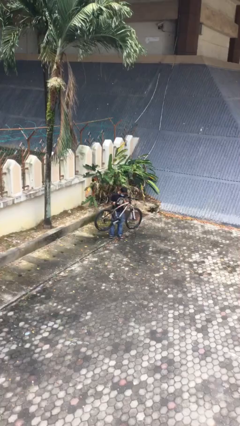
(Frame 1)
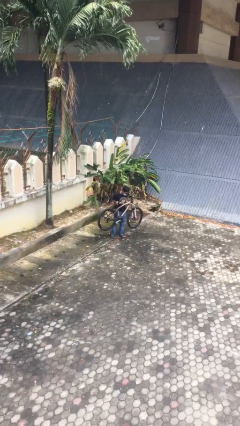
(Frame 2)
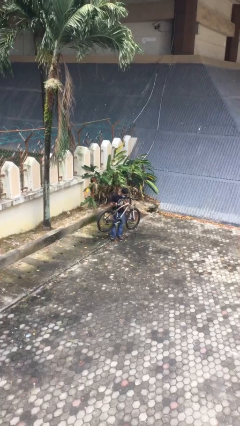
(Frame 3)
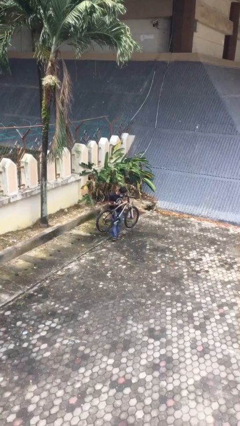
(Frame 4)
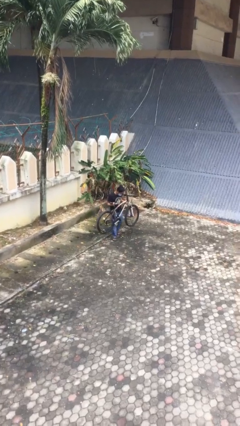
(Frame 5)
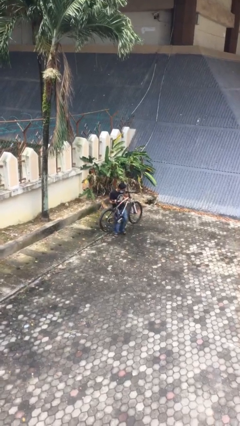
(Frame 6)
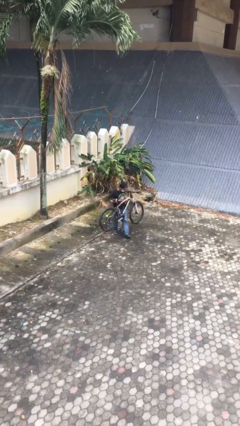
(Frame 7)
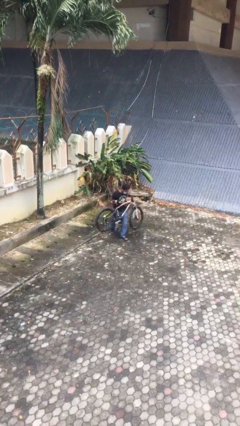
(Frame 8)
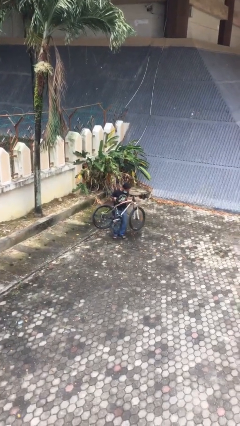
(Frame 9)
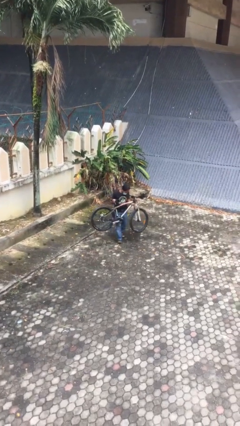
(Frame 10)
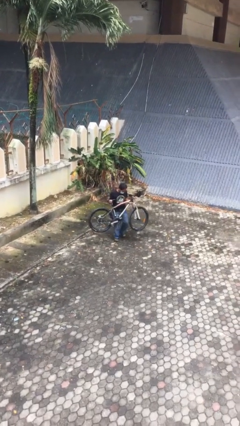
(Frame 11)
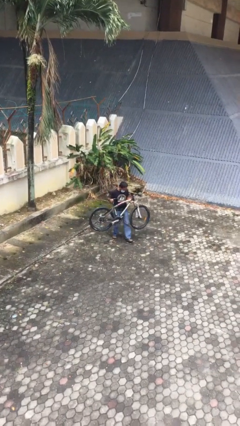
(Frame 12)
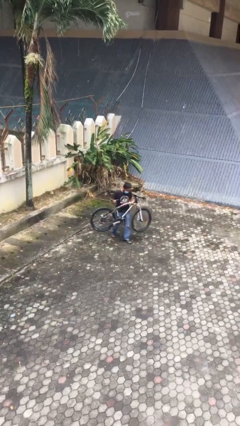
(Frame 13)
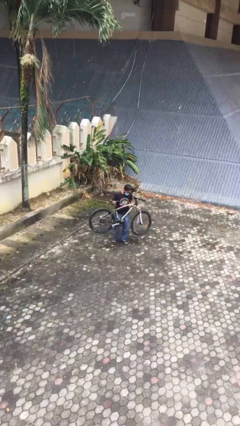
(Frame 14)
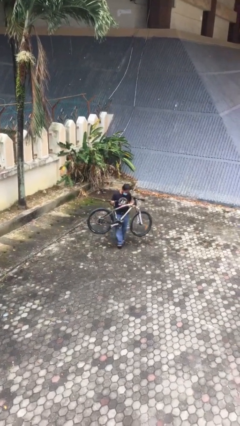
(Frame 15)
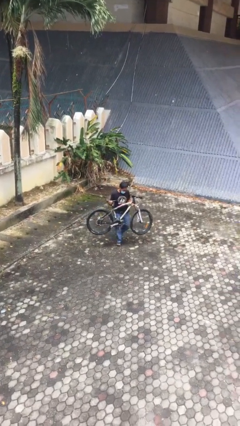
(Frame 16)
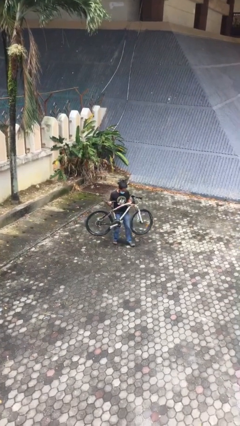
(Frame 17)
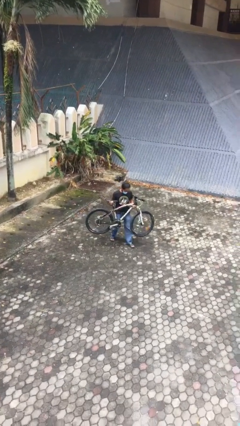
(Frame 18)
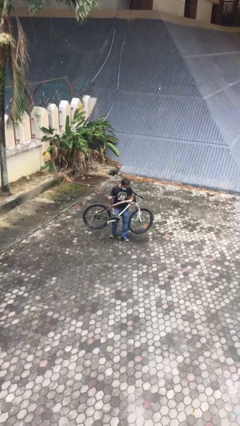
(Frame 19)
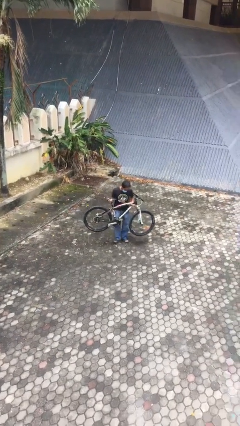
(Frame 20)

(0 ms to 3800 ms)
person carries heavy object

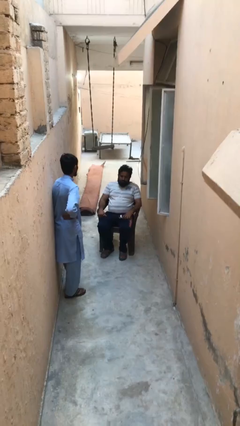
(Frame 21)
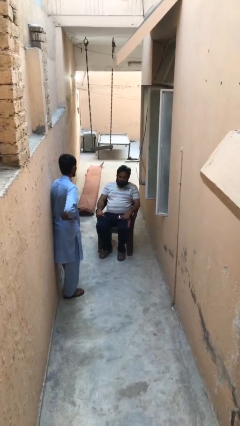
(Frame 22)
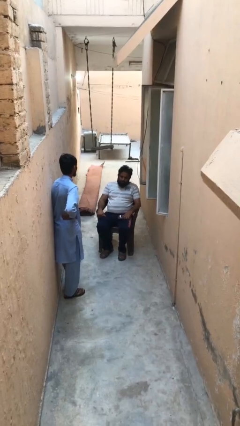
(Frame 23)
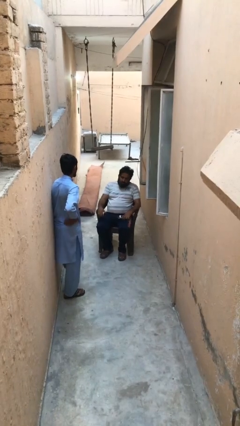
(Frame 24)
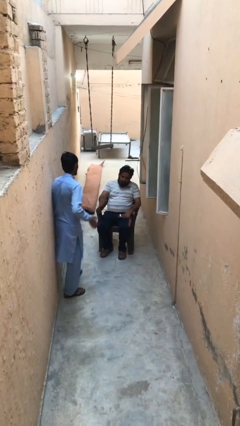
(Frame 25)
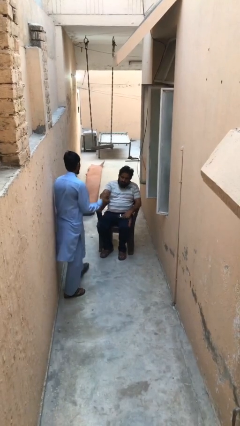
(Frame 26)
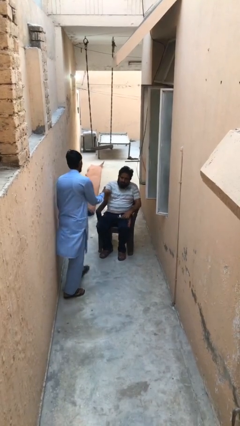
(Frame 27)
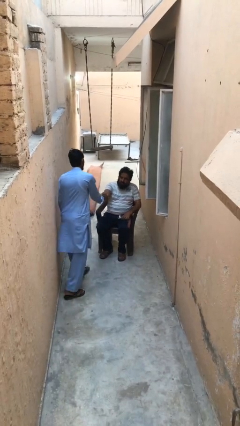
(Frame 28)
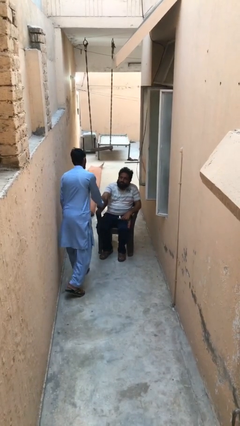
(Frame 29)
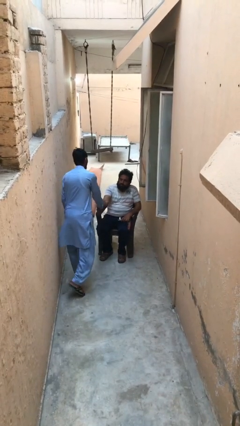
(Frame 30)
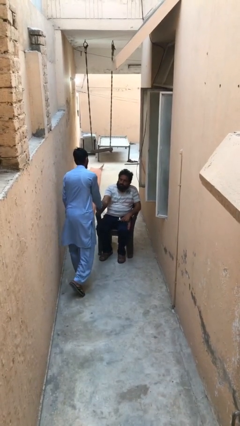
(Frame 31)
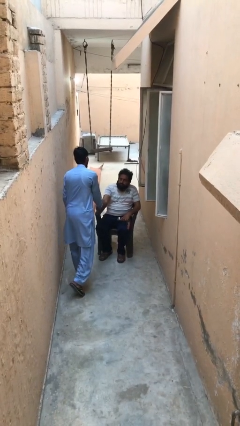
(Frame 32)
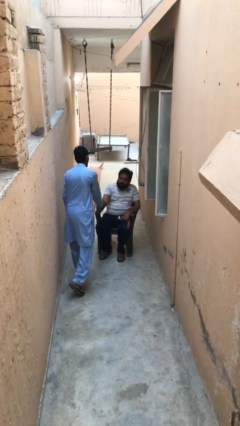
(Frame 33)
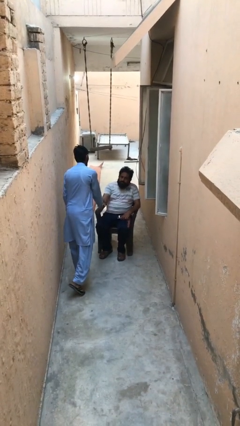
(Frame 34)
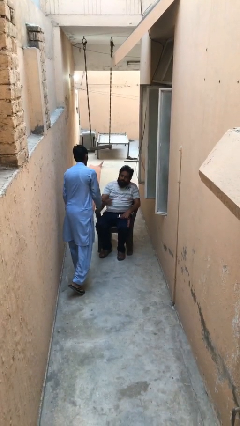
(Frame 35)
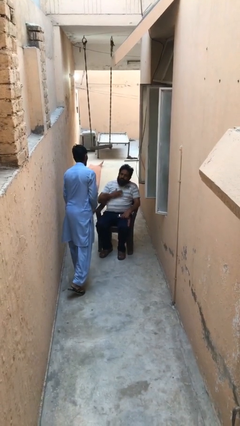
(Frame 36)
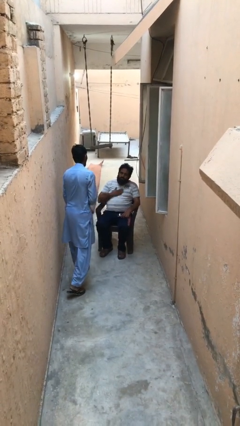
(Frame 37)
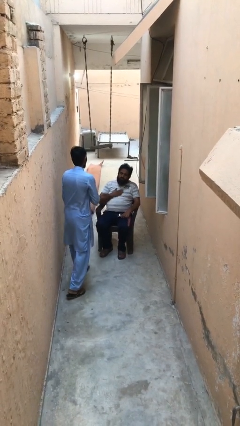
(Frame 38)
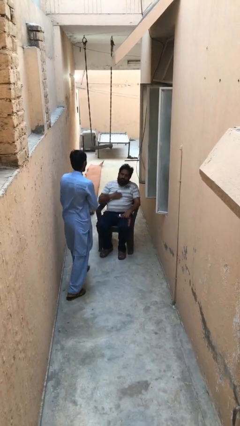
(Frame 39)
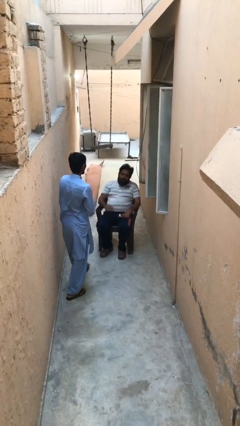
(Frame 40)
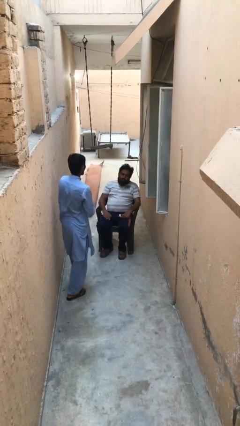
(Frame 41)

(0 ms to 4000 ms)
person shakes hand

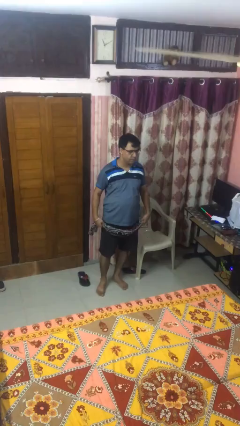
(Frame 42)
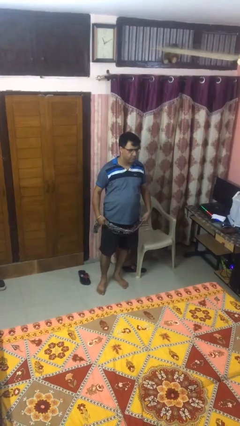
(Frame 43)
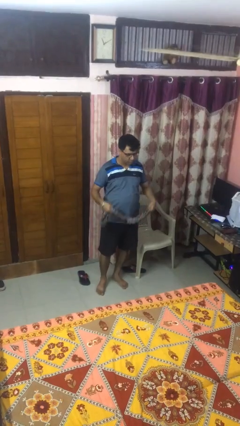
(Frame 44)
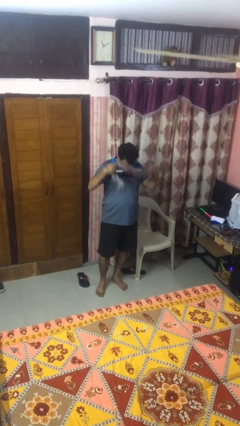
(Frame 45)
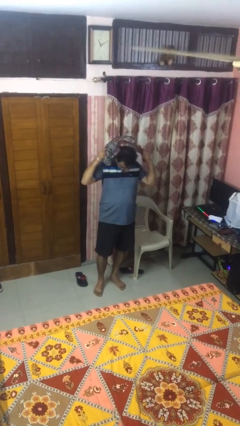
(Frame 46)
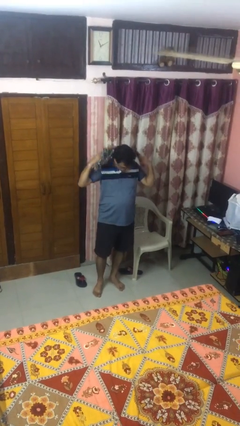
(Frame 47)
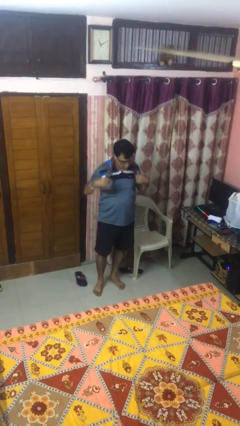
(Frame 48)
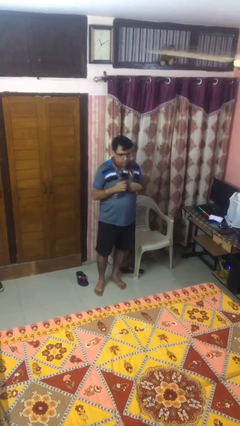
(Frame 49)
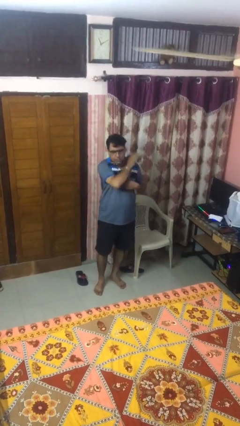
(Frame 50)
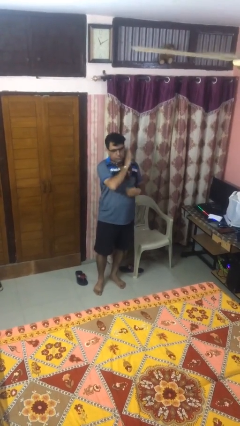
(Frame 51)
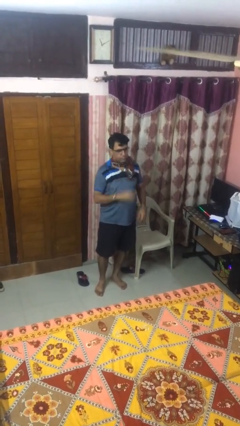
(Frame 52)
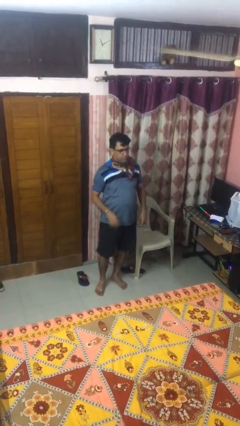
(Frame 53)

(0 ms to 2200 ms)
person puts on scarf

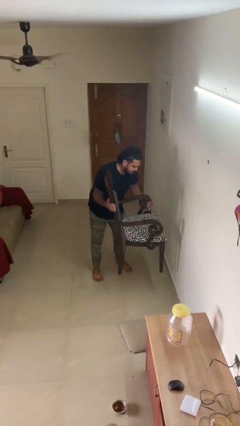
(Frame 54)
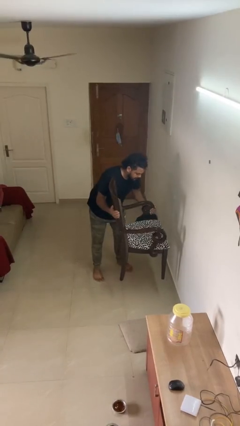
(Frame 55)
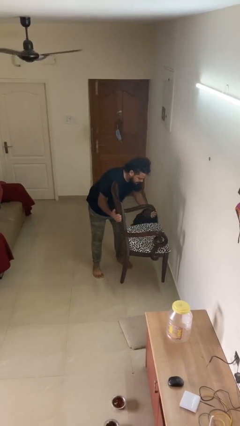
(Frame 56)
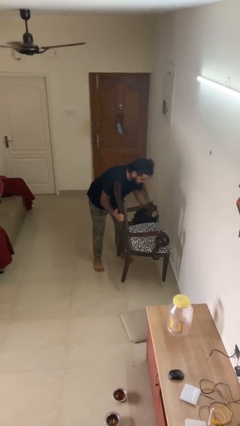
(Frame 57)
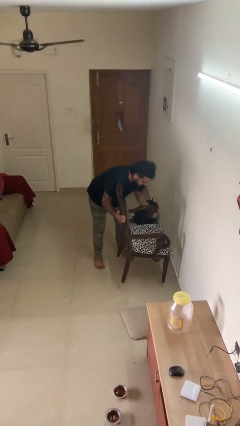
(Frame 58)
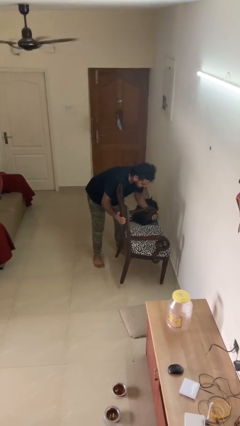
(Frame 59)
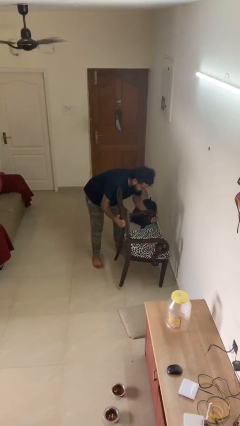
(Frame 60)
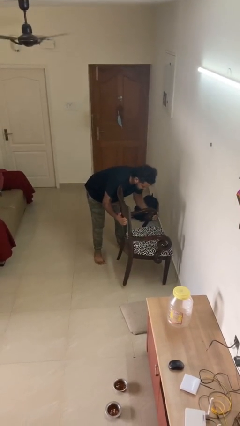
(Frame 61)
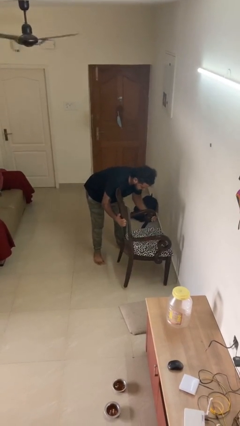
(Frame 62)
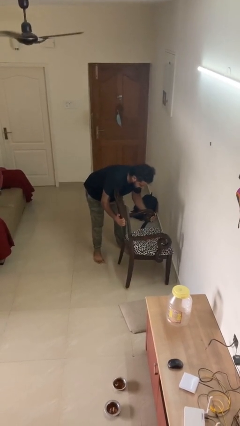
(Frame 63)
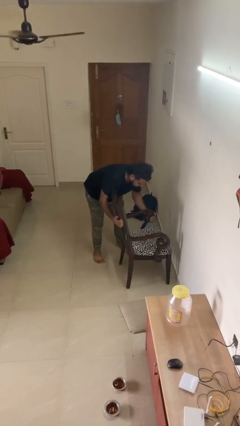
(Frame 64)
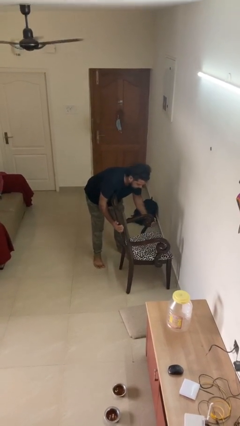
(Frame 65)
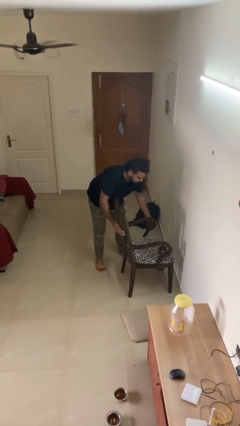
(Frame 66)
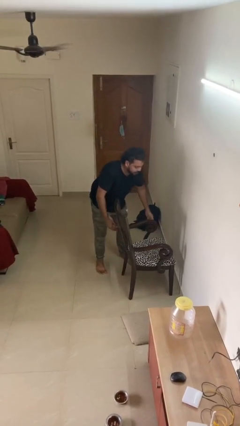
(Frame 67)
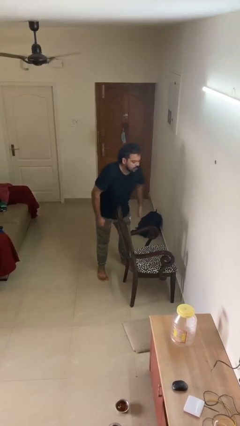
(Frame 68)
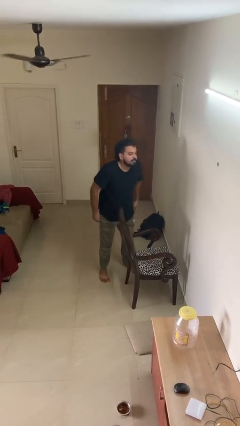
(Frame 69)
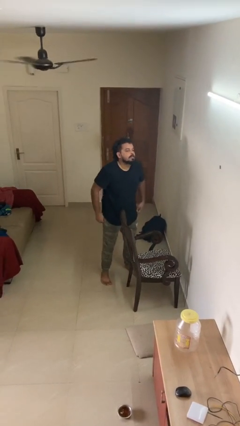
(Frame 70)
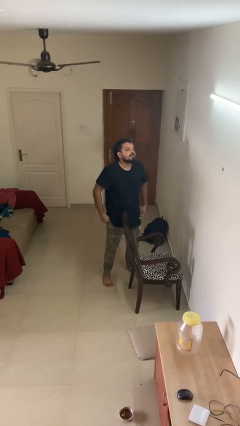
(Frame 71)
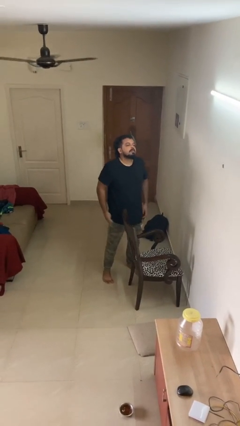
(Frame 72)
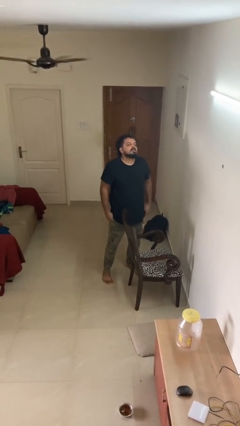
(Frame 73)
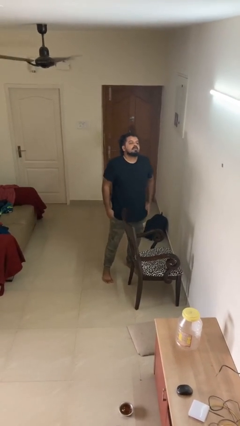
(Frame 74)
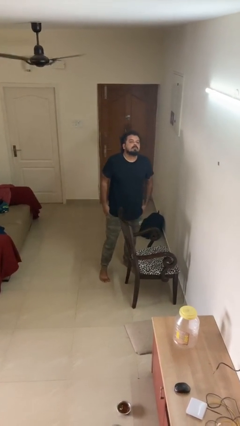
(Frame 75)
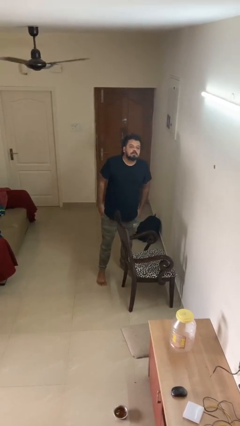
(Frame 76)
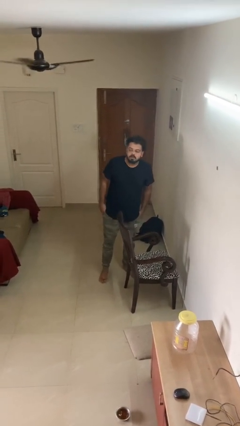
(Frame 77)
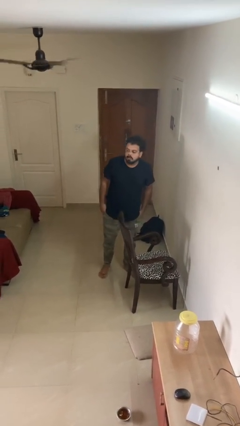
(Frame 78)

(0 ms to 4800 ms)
person puts down object on floor

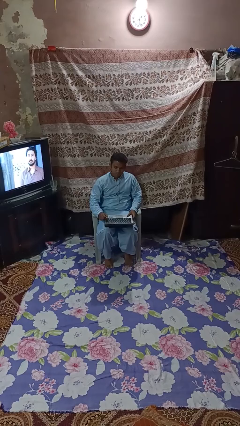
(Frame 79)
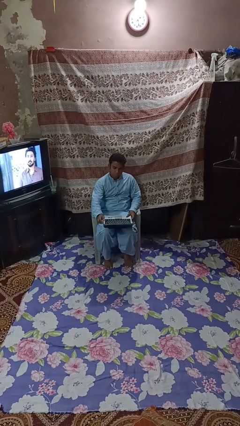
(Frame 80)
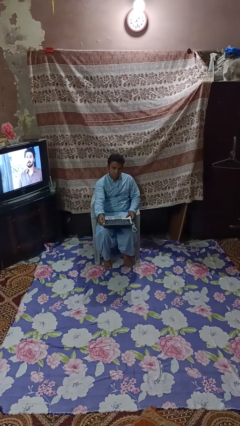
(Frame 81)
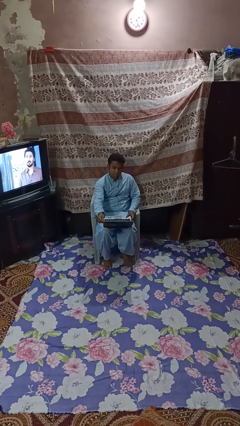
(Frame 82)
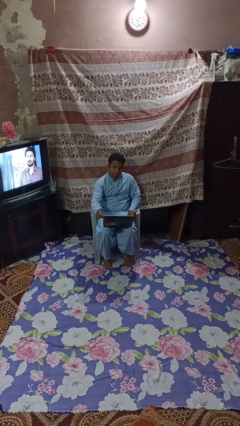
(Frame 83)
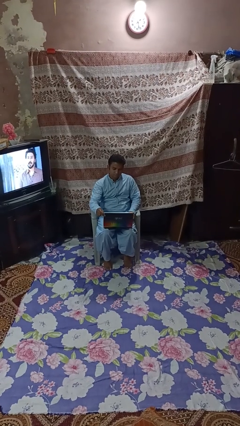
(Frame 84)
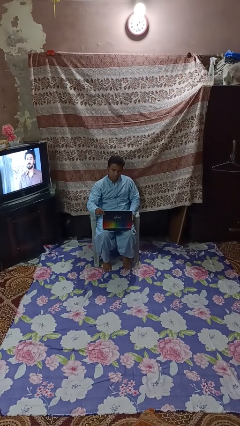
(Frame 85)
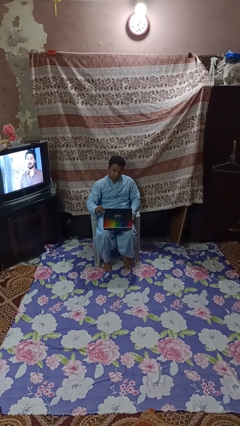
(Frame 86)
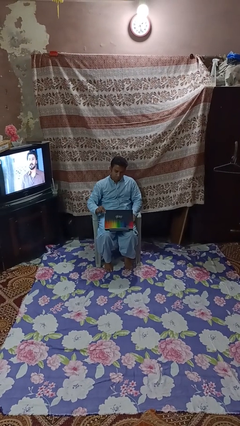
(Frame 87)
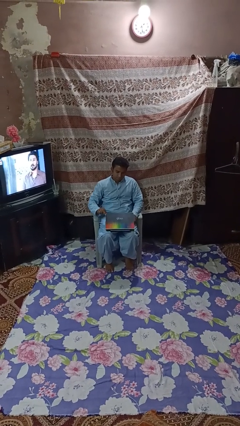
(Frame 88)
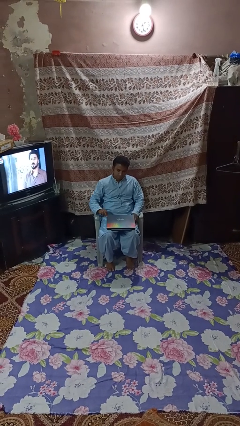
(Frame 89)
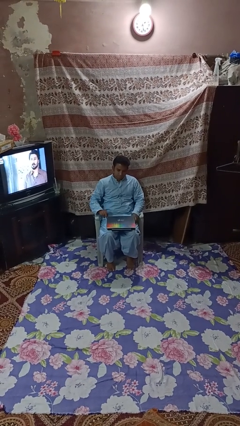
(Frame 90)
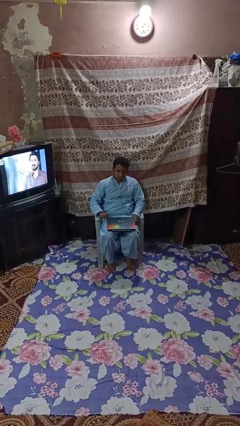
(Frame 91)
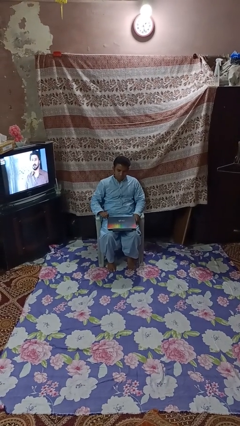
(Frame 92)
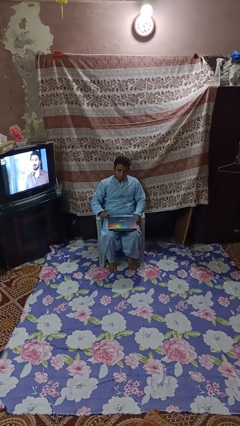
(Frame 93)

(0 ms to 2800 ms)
person closes laptop
